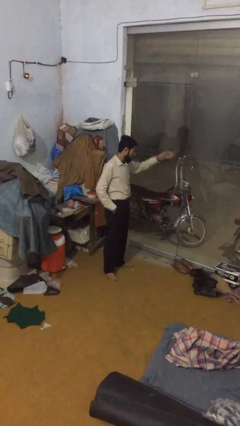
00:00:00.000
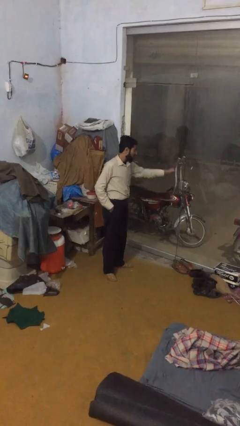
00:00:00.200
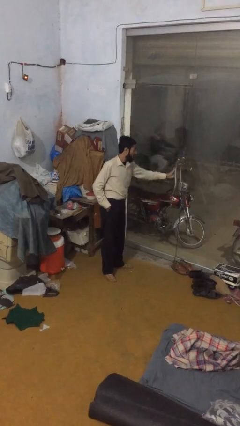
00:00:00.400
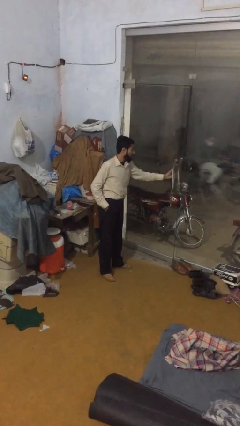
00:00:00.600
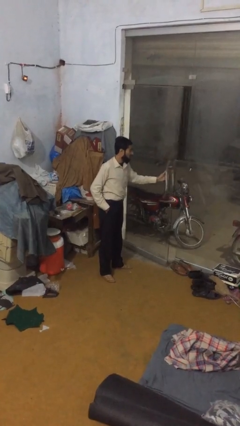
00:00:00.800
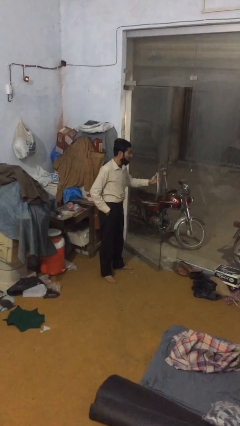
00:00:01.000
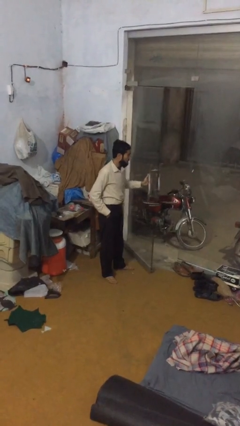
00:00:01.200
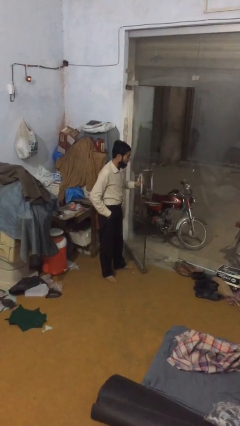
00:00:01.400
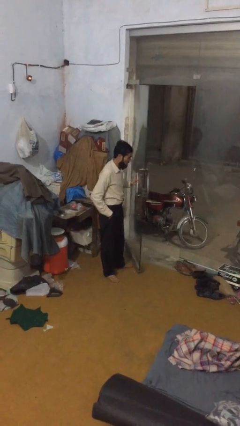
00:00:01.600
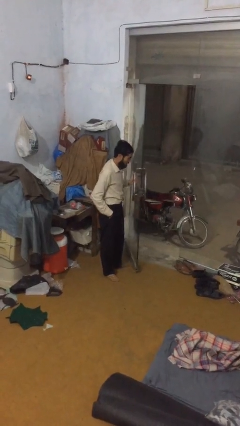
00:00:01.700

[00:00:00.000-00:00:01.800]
person opens facility door

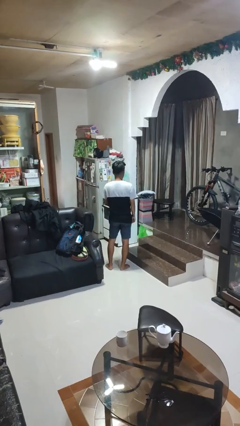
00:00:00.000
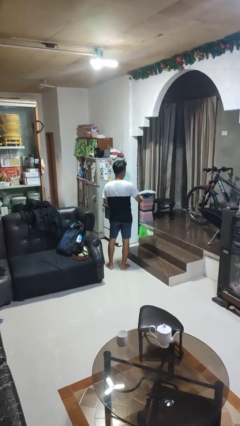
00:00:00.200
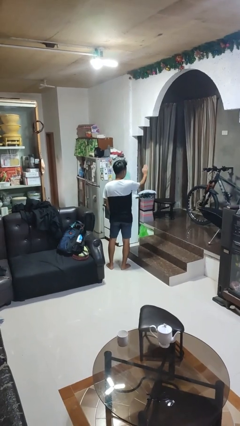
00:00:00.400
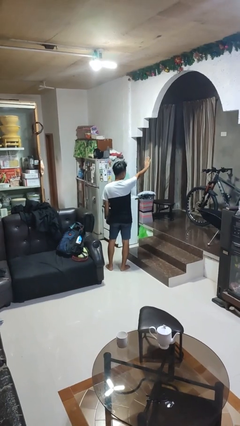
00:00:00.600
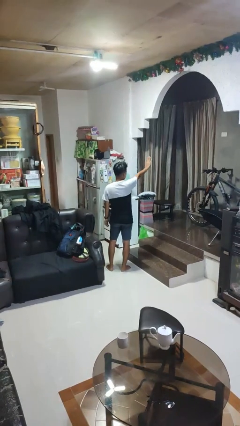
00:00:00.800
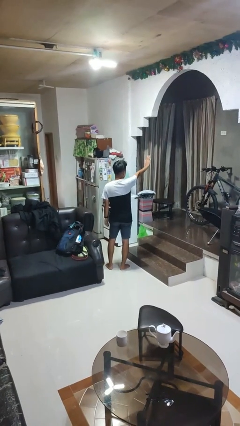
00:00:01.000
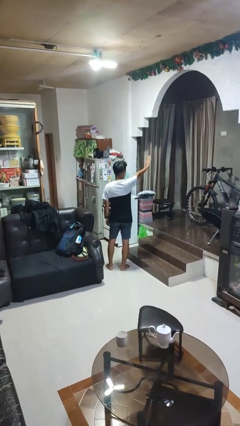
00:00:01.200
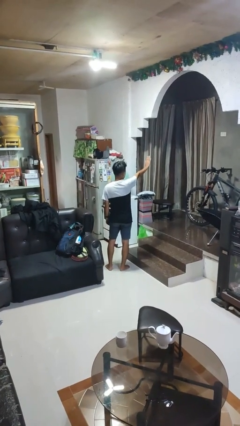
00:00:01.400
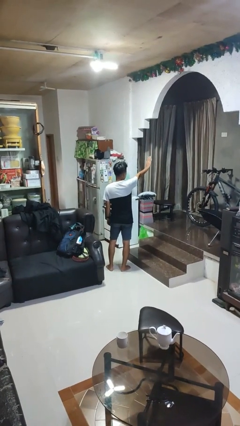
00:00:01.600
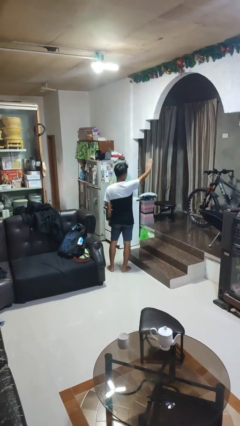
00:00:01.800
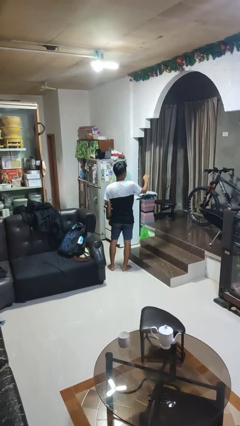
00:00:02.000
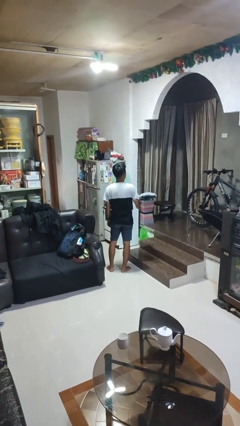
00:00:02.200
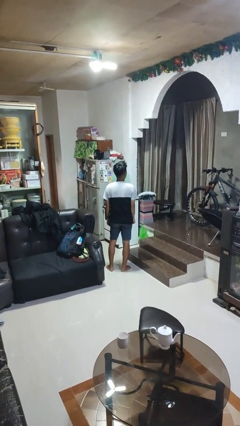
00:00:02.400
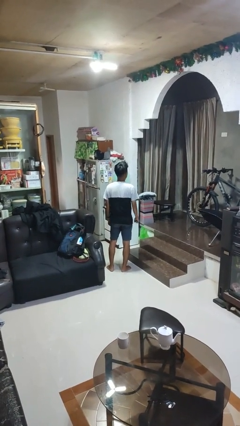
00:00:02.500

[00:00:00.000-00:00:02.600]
person gestures stop

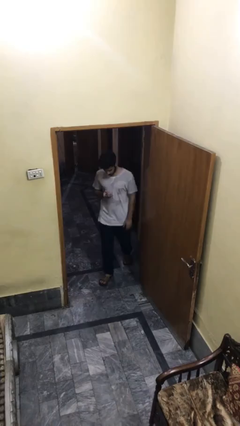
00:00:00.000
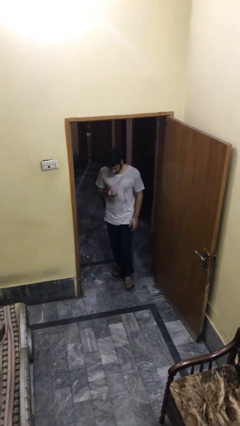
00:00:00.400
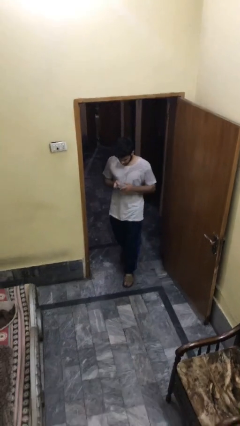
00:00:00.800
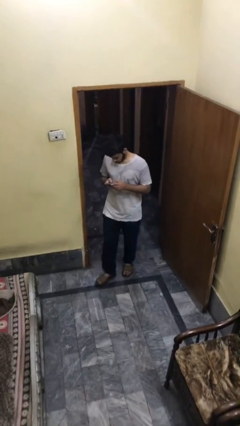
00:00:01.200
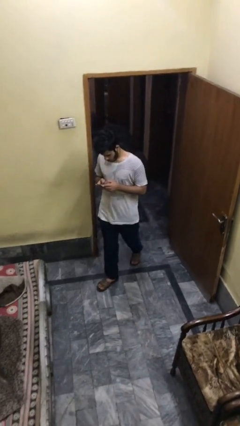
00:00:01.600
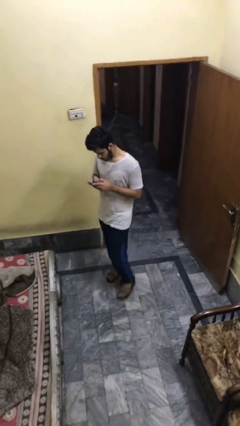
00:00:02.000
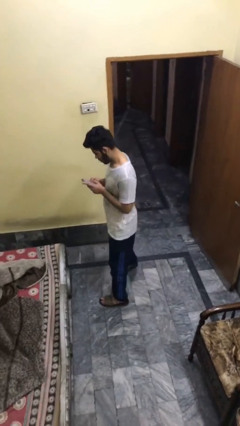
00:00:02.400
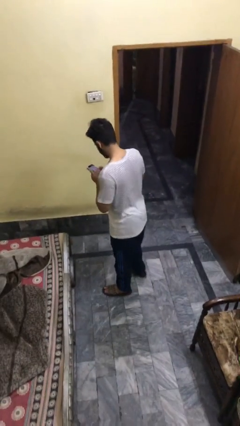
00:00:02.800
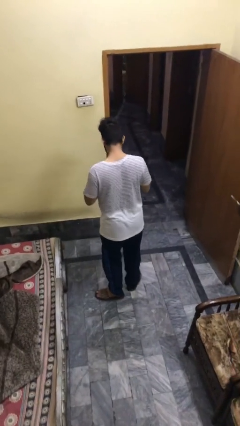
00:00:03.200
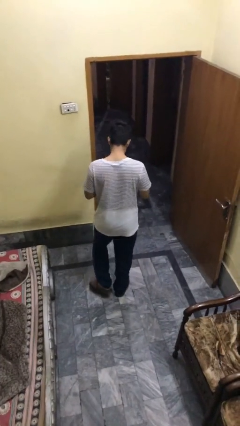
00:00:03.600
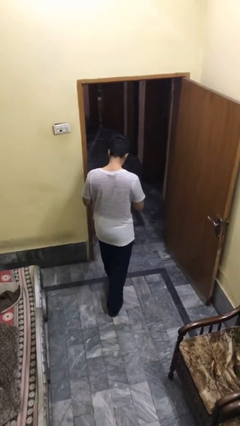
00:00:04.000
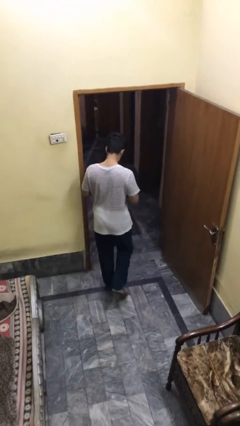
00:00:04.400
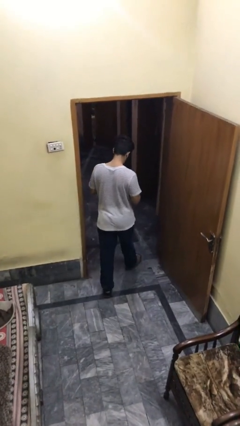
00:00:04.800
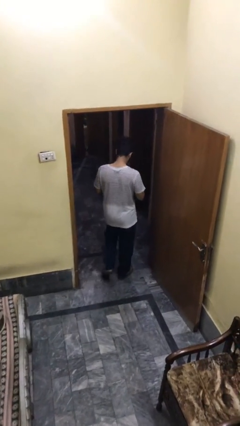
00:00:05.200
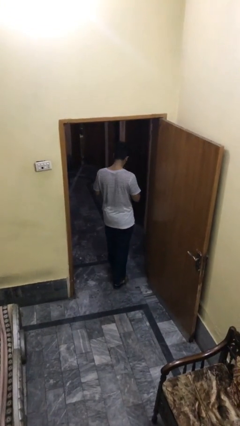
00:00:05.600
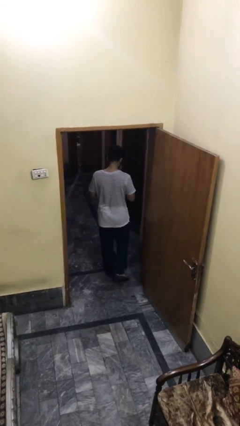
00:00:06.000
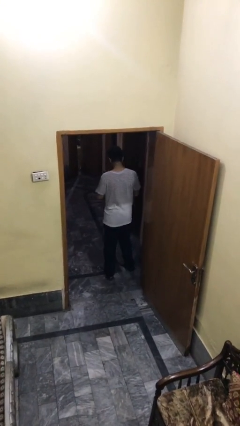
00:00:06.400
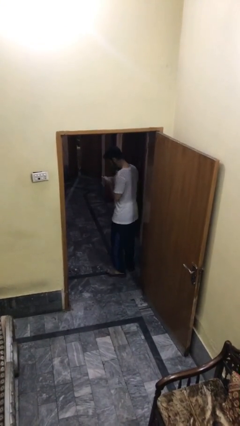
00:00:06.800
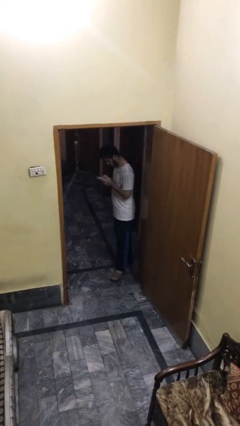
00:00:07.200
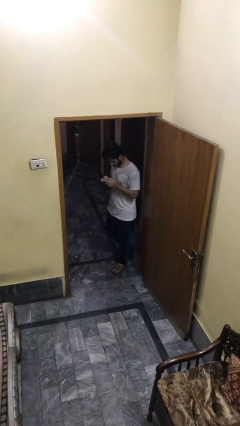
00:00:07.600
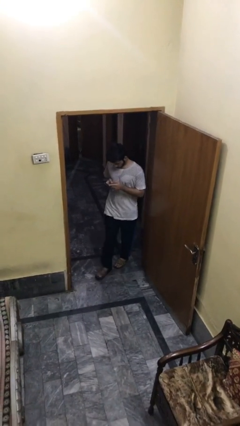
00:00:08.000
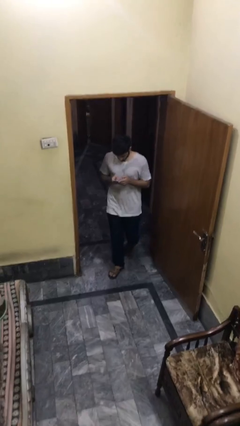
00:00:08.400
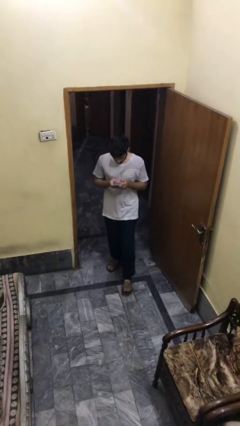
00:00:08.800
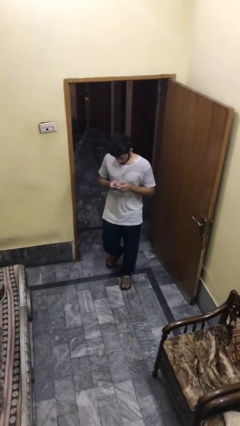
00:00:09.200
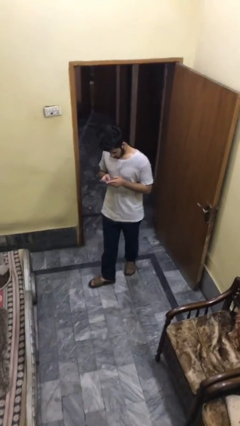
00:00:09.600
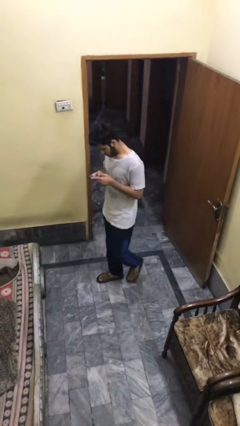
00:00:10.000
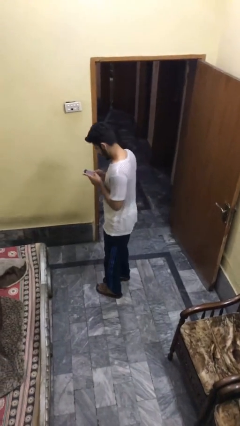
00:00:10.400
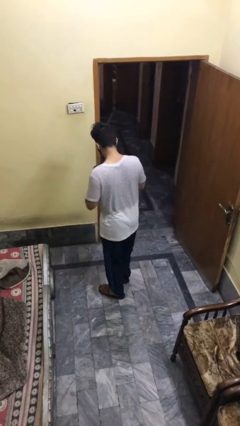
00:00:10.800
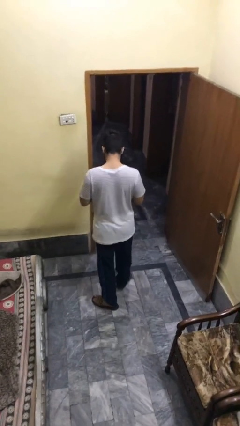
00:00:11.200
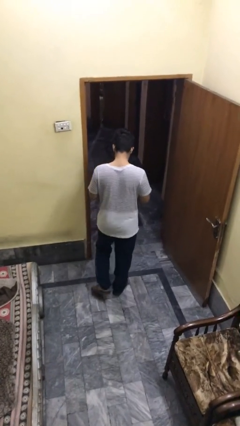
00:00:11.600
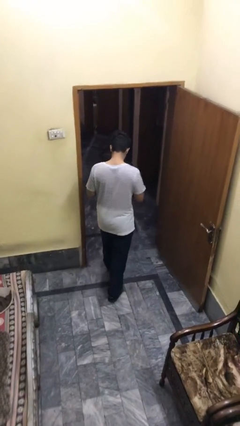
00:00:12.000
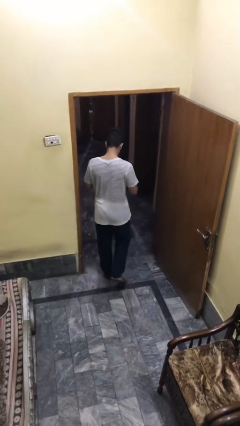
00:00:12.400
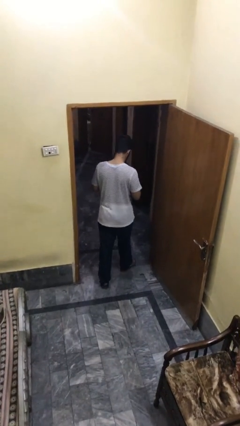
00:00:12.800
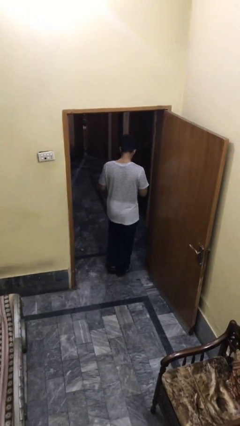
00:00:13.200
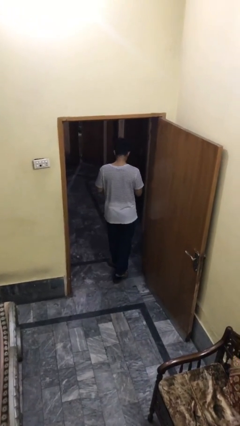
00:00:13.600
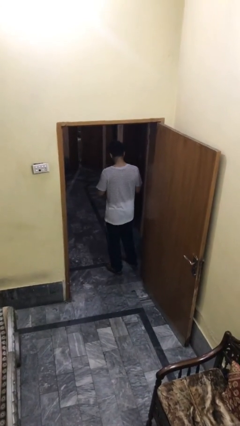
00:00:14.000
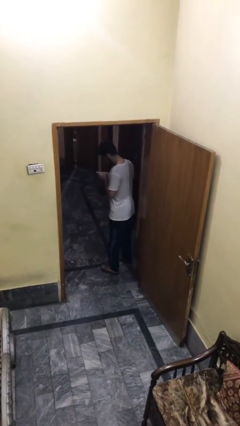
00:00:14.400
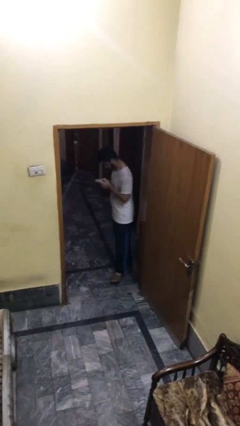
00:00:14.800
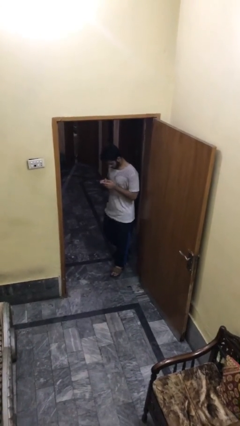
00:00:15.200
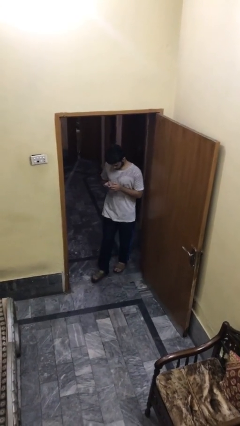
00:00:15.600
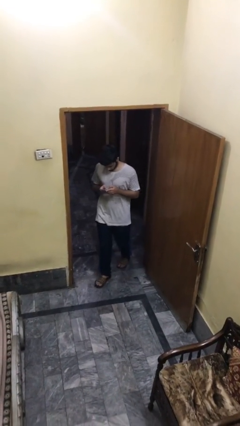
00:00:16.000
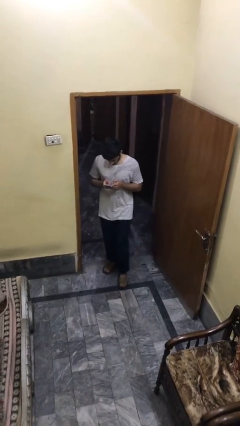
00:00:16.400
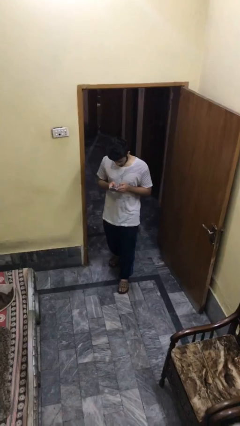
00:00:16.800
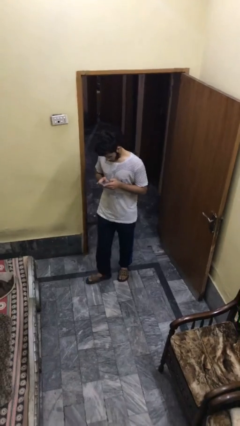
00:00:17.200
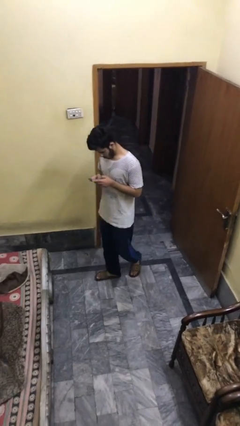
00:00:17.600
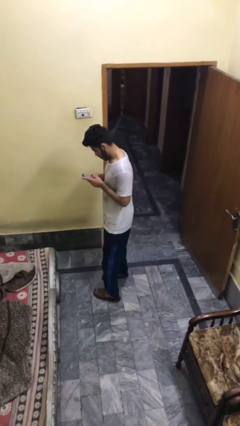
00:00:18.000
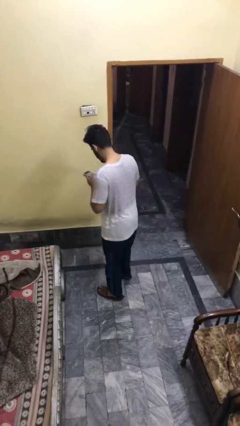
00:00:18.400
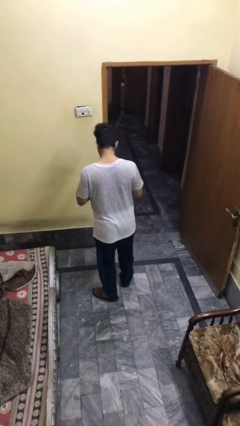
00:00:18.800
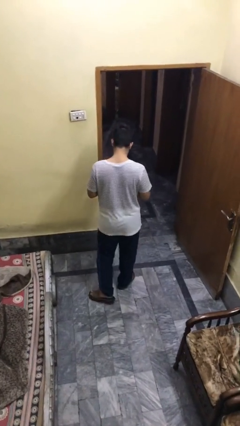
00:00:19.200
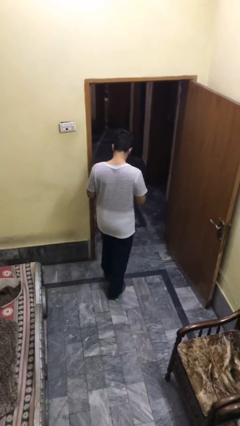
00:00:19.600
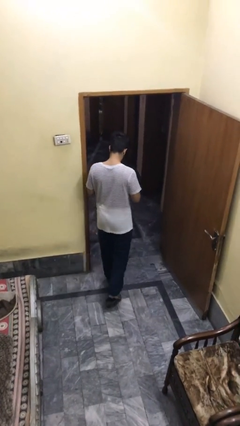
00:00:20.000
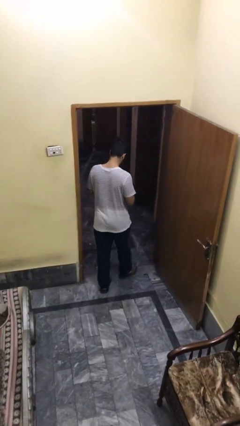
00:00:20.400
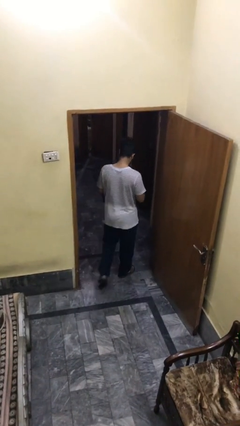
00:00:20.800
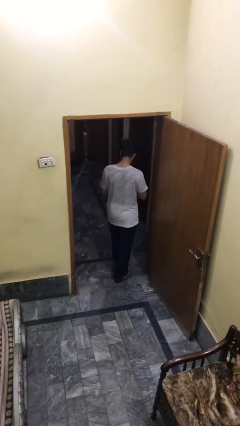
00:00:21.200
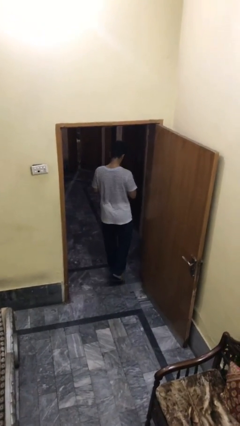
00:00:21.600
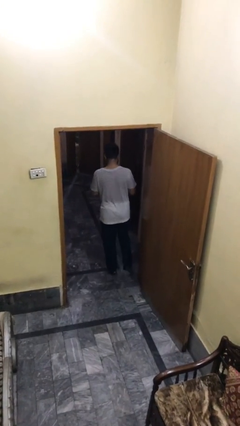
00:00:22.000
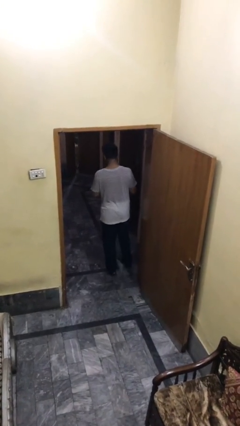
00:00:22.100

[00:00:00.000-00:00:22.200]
person texts on phone

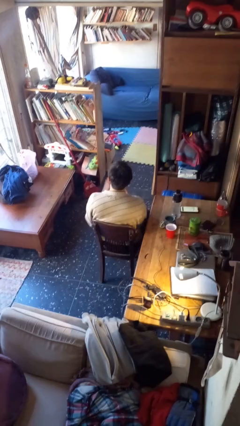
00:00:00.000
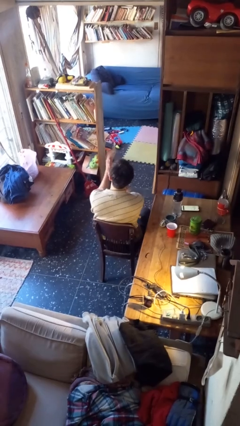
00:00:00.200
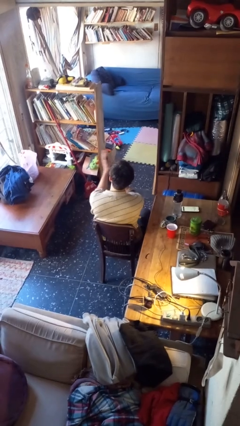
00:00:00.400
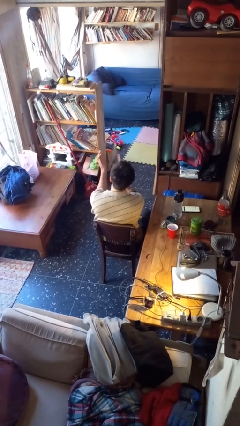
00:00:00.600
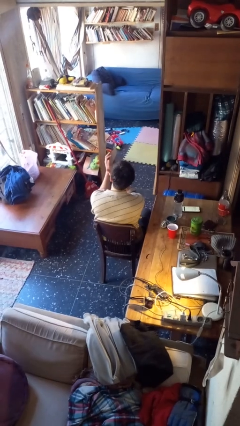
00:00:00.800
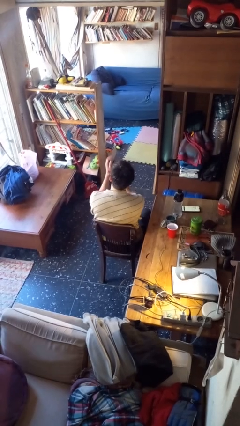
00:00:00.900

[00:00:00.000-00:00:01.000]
person claps hands

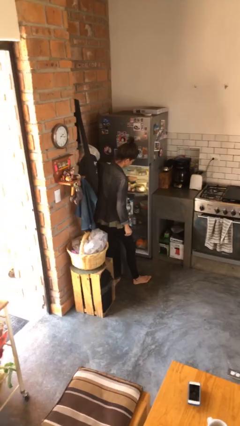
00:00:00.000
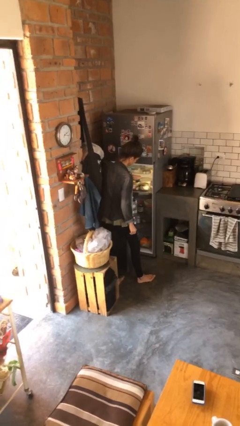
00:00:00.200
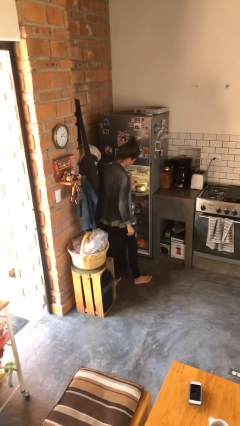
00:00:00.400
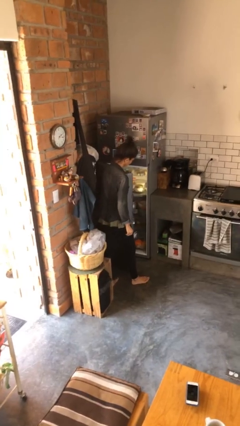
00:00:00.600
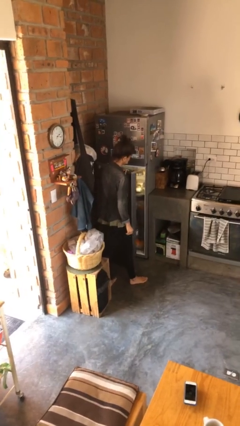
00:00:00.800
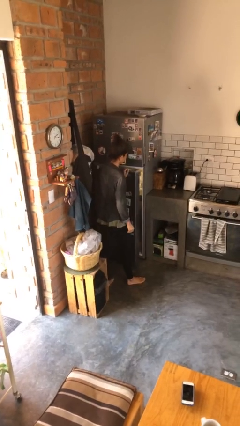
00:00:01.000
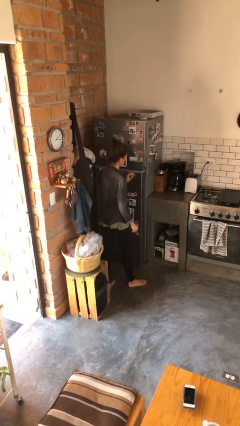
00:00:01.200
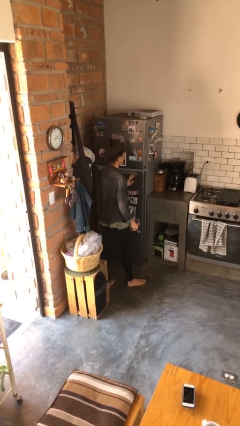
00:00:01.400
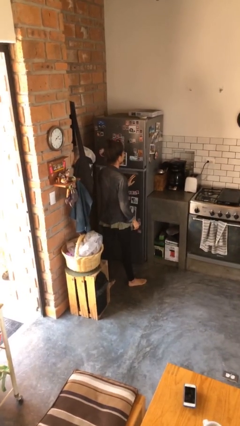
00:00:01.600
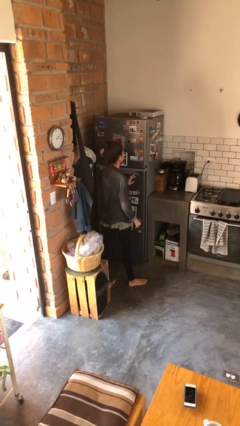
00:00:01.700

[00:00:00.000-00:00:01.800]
person closes refrigerator
